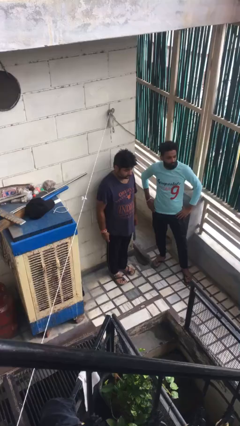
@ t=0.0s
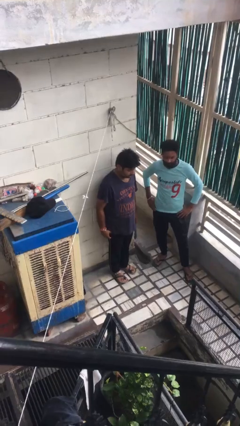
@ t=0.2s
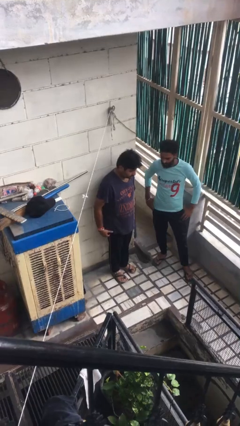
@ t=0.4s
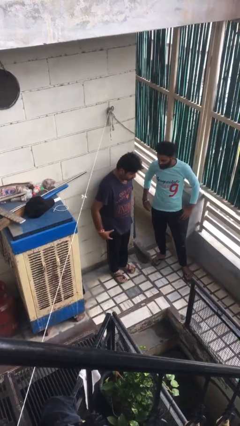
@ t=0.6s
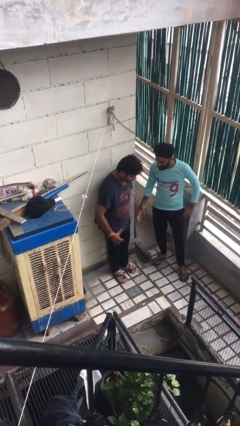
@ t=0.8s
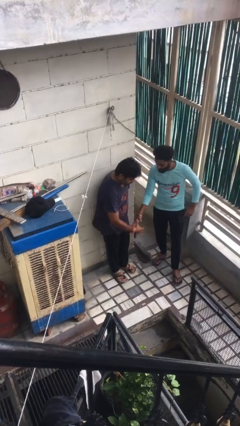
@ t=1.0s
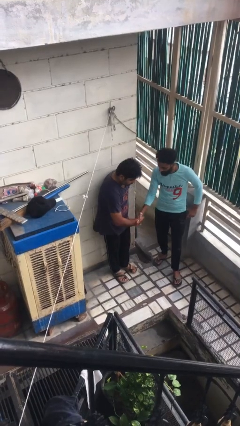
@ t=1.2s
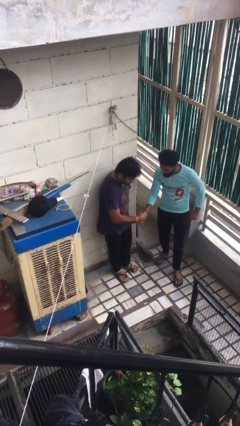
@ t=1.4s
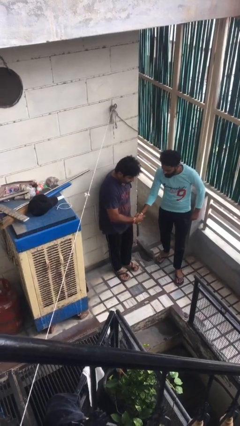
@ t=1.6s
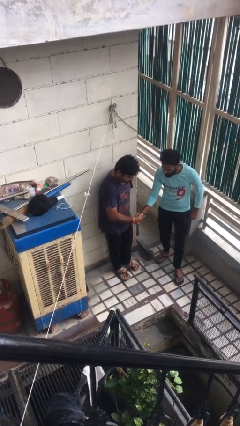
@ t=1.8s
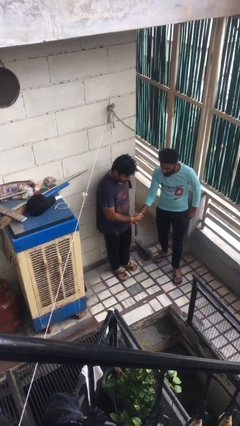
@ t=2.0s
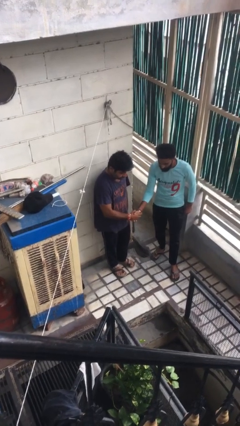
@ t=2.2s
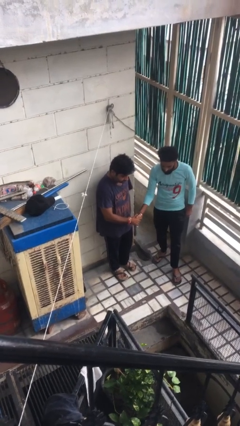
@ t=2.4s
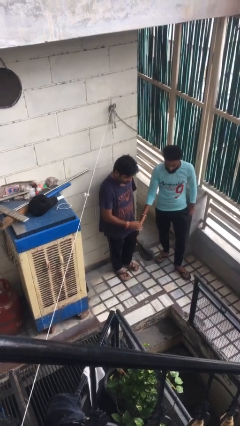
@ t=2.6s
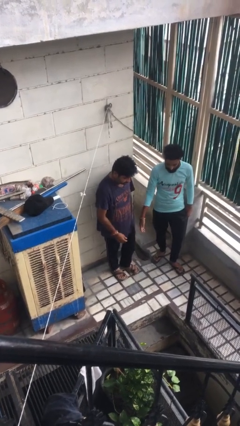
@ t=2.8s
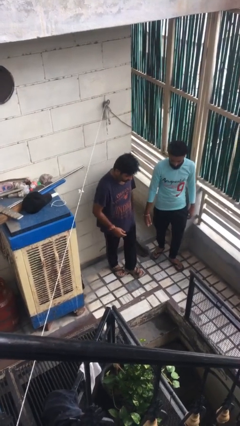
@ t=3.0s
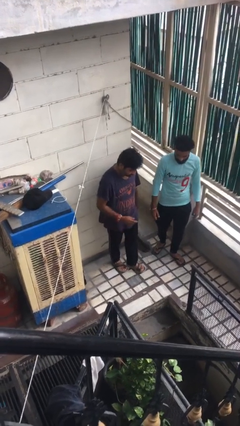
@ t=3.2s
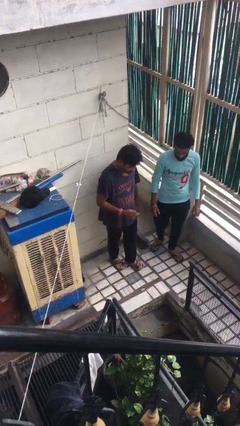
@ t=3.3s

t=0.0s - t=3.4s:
person shakes hand

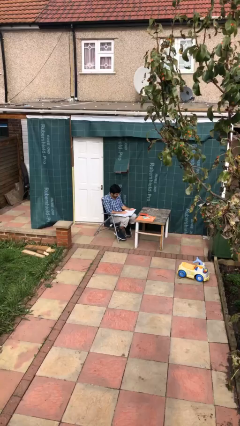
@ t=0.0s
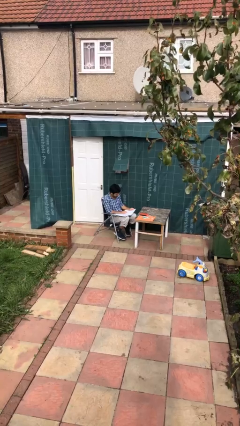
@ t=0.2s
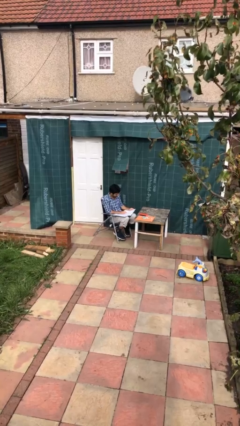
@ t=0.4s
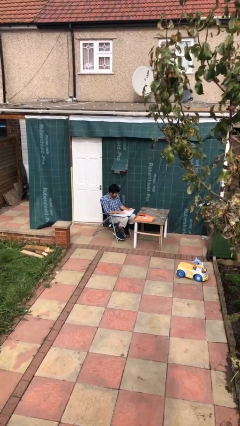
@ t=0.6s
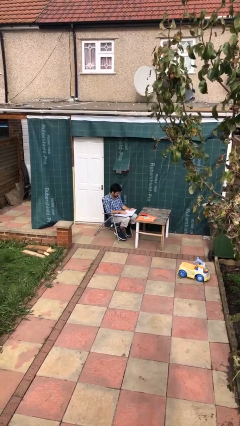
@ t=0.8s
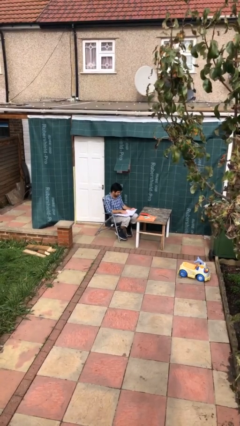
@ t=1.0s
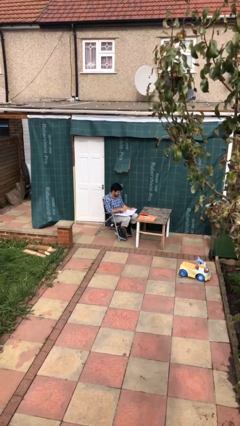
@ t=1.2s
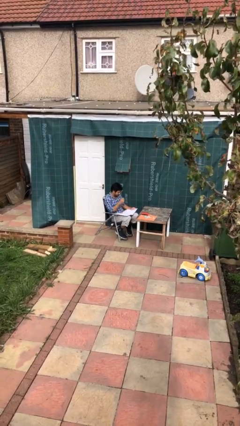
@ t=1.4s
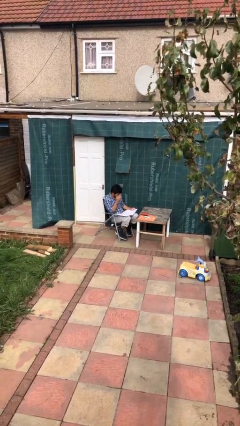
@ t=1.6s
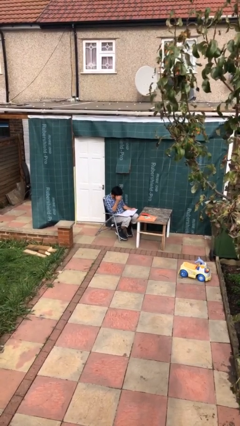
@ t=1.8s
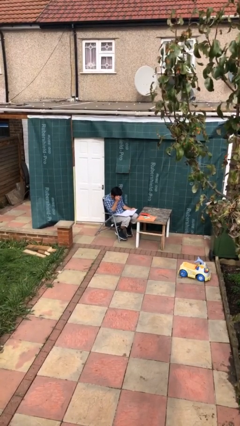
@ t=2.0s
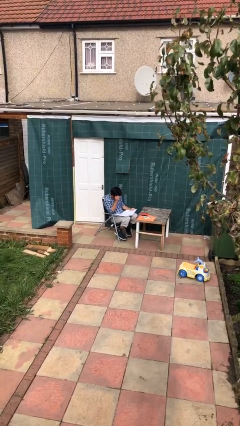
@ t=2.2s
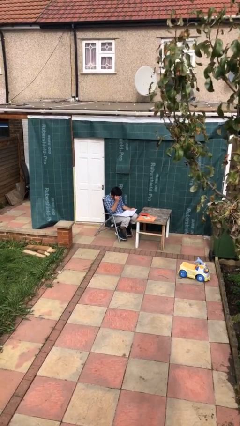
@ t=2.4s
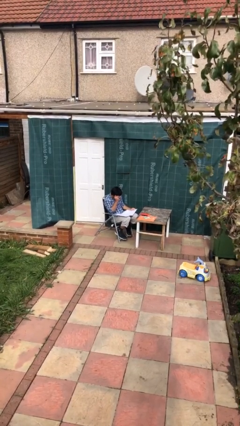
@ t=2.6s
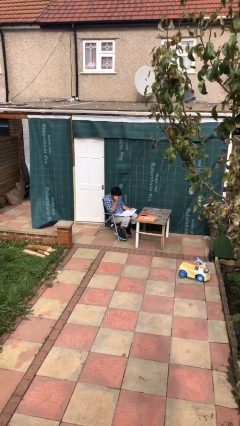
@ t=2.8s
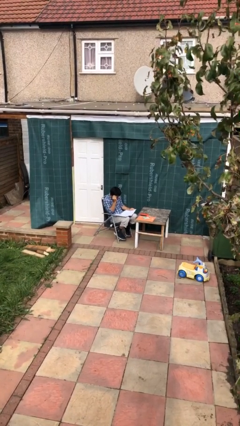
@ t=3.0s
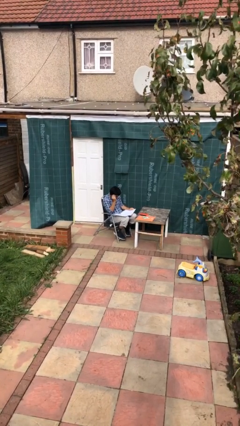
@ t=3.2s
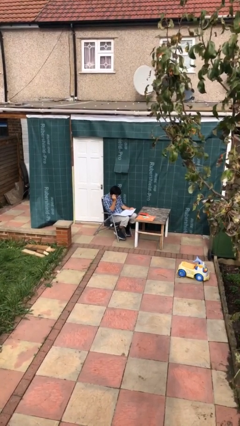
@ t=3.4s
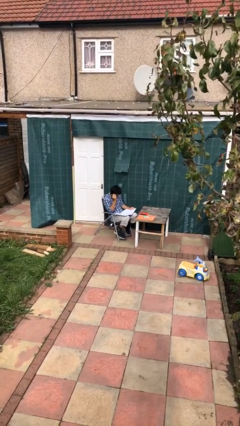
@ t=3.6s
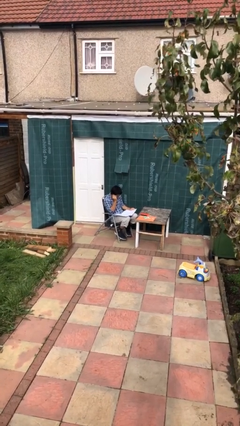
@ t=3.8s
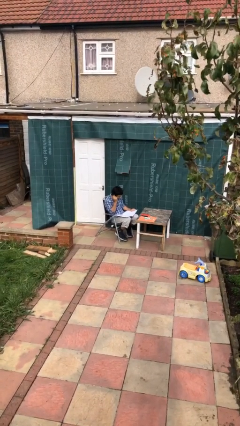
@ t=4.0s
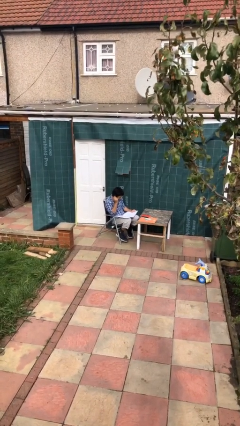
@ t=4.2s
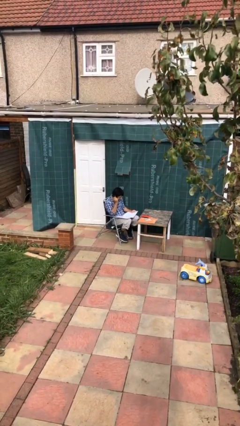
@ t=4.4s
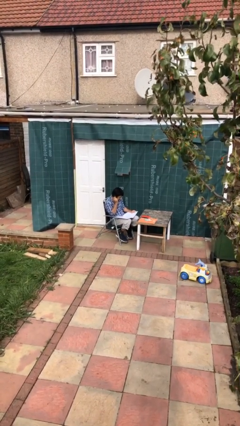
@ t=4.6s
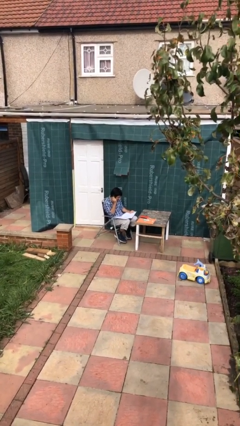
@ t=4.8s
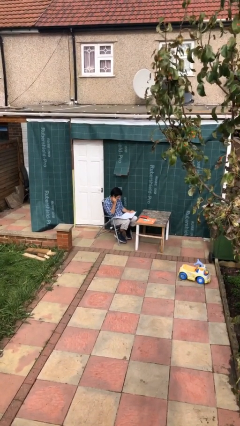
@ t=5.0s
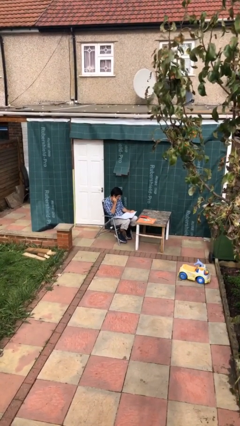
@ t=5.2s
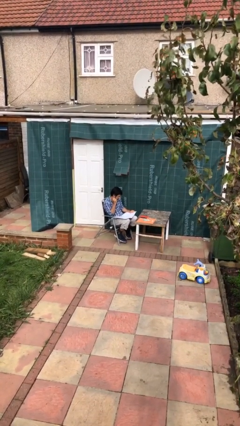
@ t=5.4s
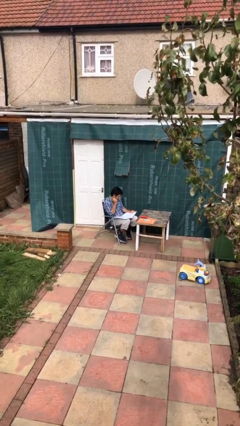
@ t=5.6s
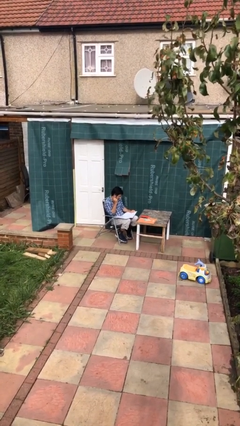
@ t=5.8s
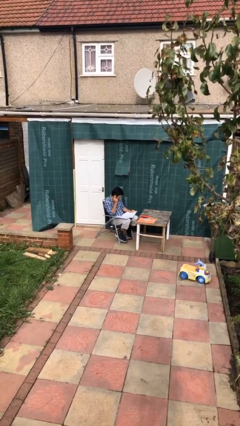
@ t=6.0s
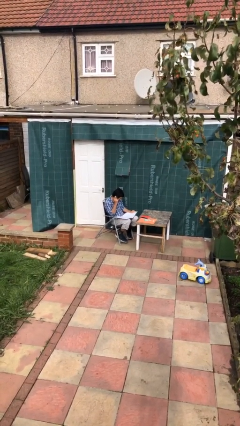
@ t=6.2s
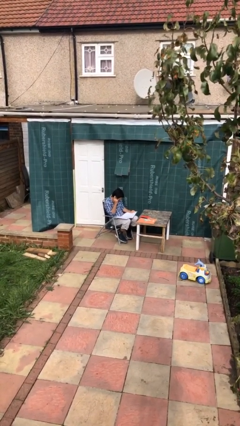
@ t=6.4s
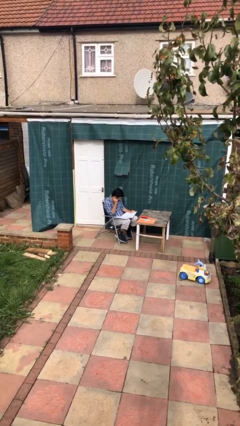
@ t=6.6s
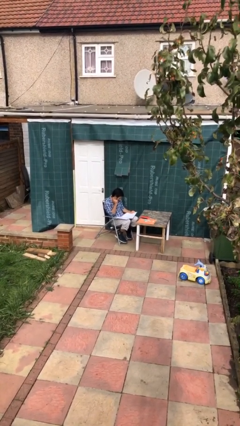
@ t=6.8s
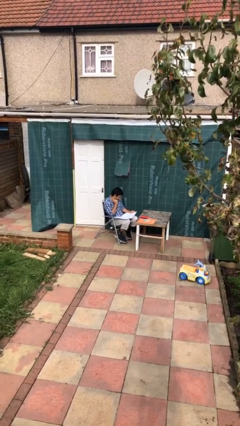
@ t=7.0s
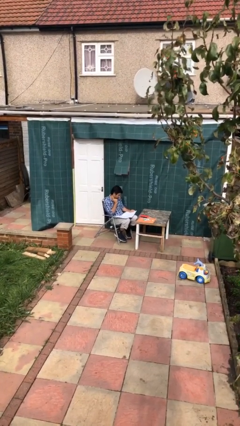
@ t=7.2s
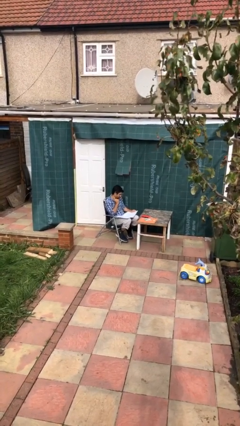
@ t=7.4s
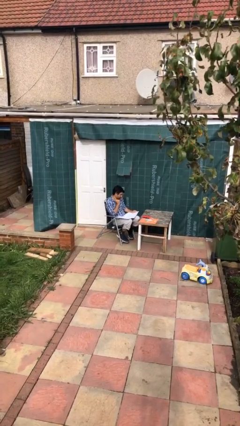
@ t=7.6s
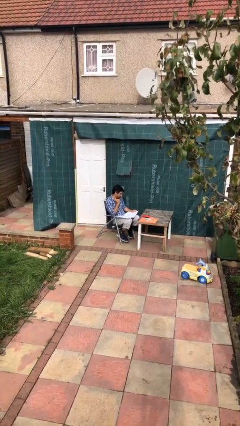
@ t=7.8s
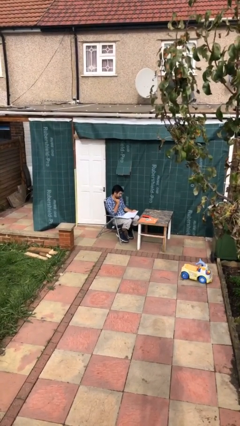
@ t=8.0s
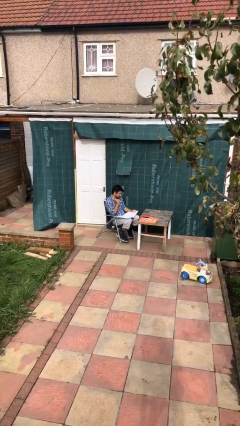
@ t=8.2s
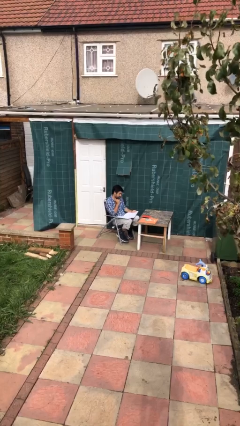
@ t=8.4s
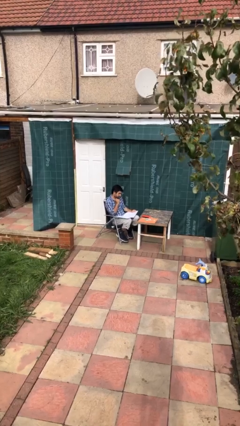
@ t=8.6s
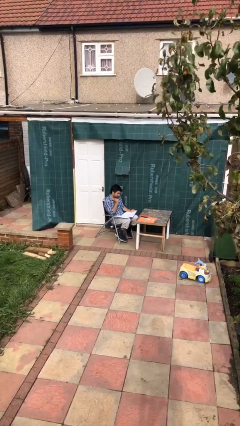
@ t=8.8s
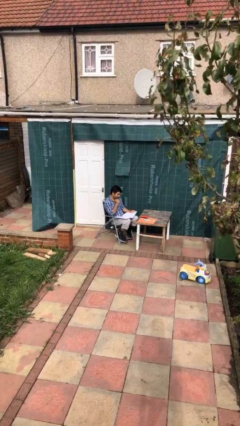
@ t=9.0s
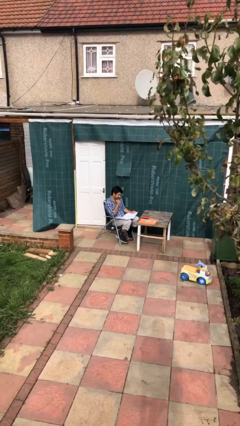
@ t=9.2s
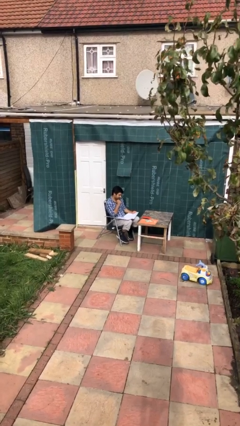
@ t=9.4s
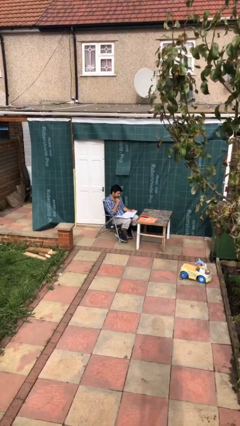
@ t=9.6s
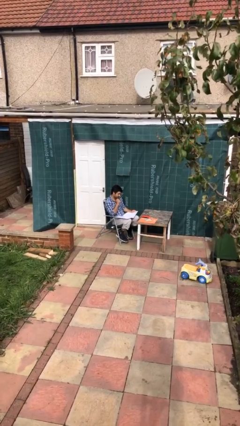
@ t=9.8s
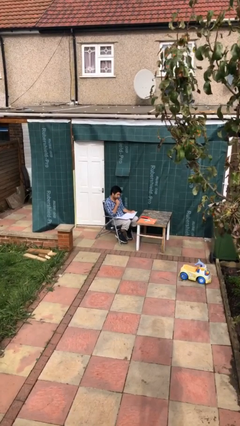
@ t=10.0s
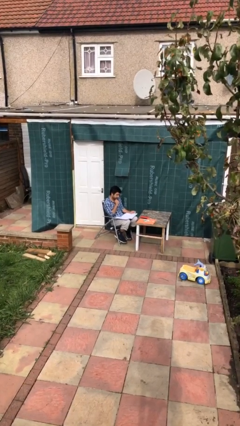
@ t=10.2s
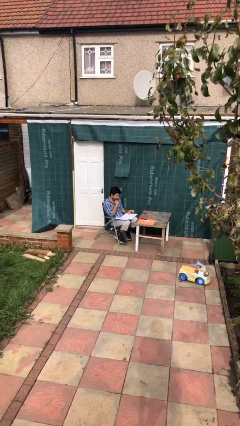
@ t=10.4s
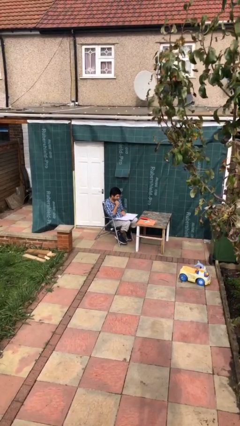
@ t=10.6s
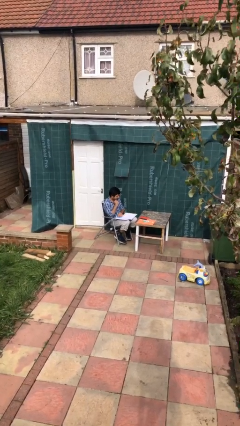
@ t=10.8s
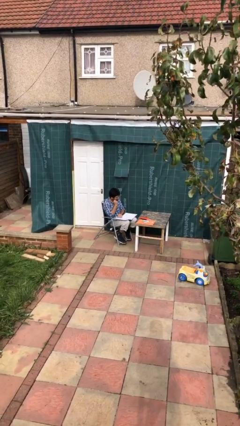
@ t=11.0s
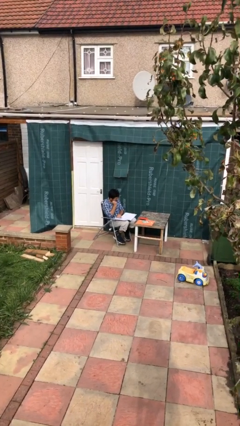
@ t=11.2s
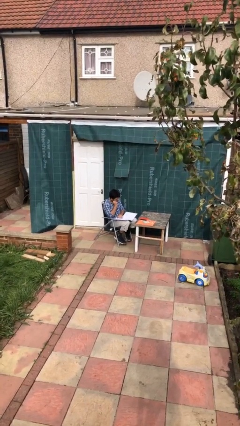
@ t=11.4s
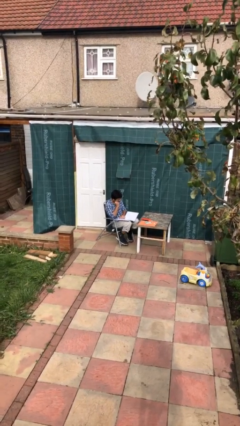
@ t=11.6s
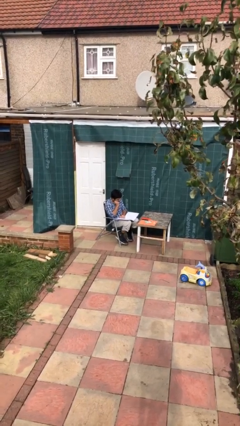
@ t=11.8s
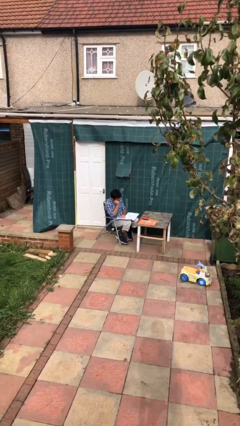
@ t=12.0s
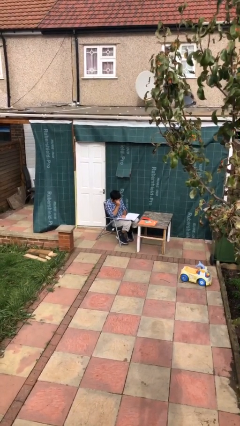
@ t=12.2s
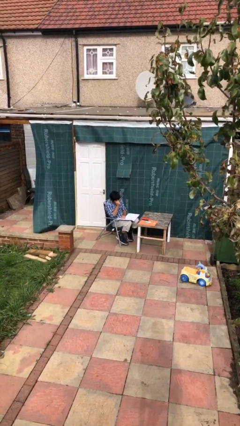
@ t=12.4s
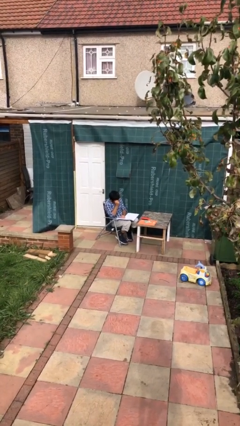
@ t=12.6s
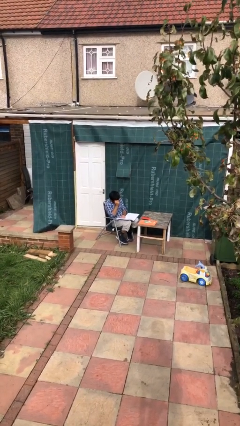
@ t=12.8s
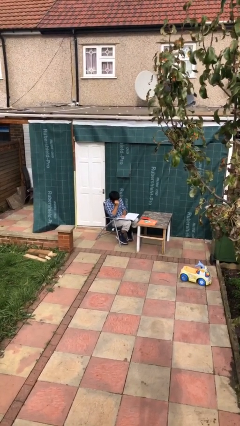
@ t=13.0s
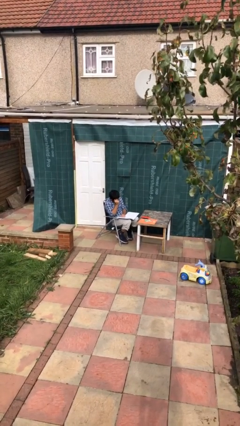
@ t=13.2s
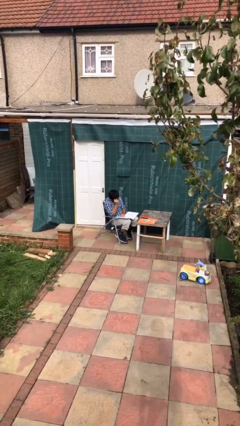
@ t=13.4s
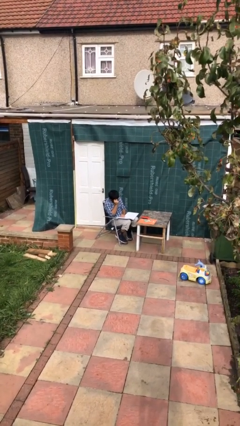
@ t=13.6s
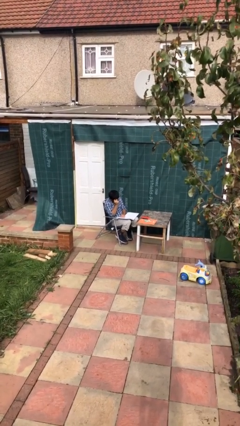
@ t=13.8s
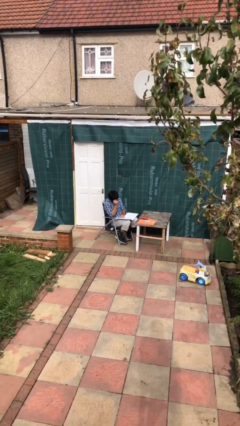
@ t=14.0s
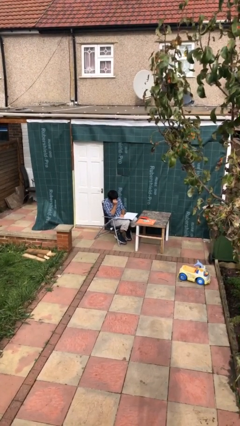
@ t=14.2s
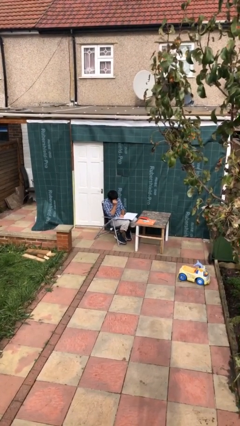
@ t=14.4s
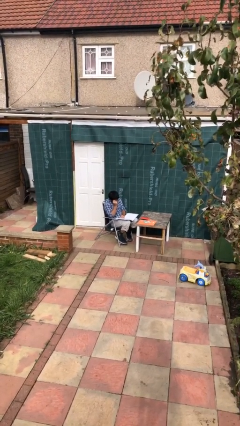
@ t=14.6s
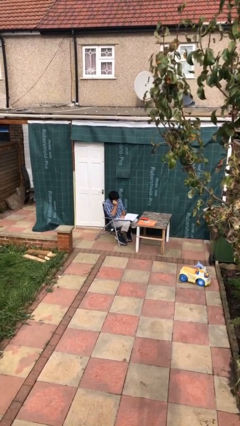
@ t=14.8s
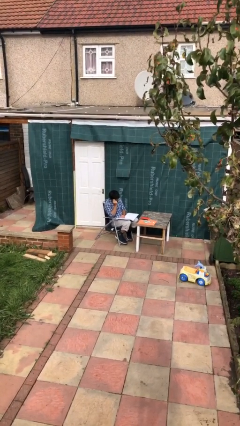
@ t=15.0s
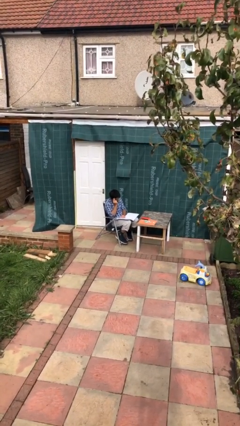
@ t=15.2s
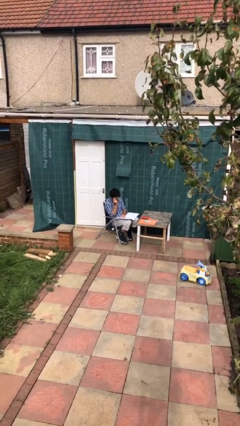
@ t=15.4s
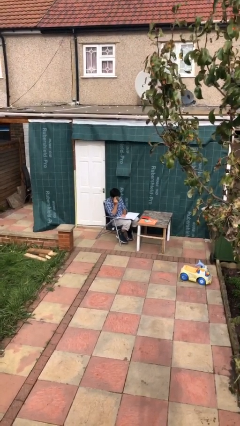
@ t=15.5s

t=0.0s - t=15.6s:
person reads document
